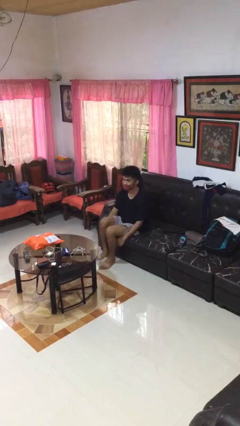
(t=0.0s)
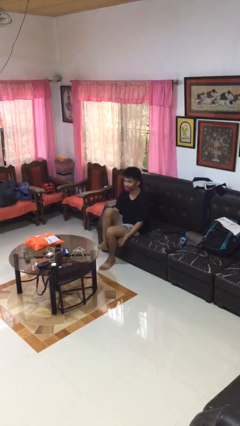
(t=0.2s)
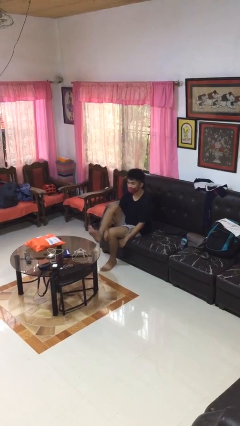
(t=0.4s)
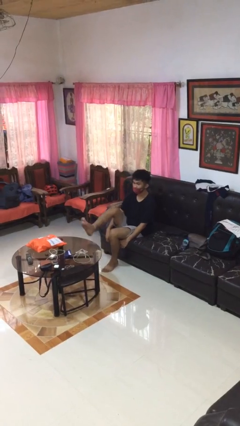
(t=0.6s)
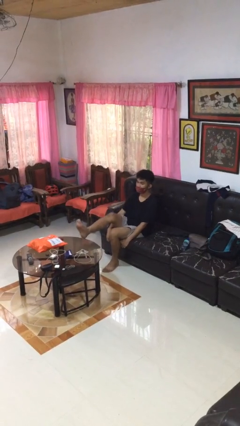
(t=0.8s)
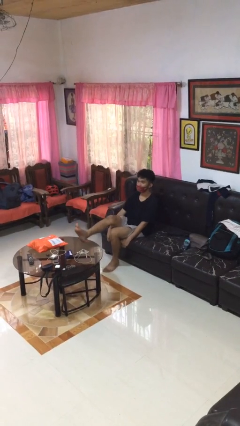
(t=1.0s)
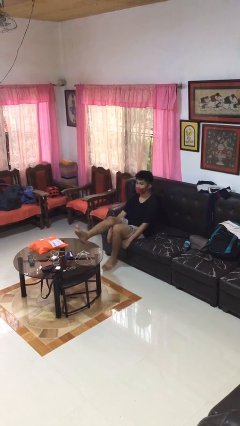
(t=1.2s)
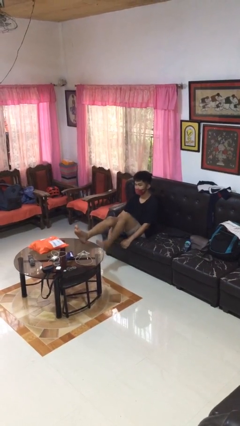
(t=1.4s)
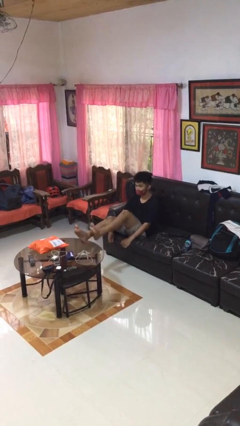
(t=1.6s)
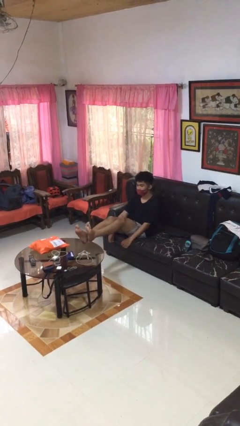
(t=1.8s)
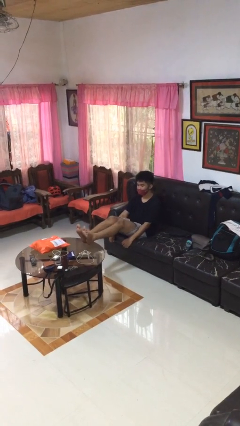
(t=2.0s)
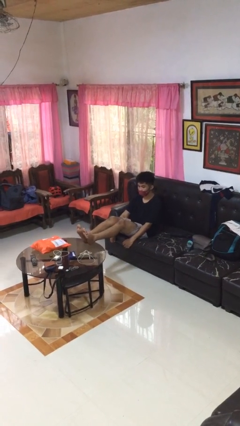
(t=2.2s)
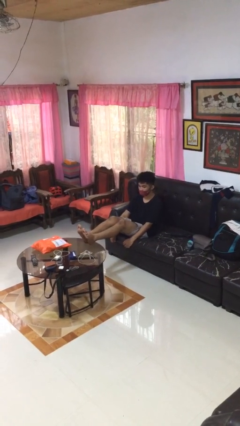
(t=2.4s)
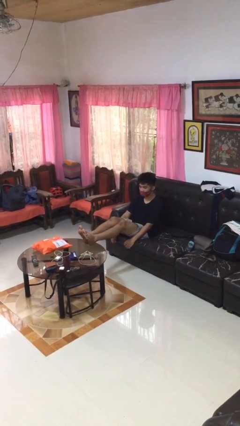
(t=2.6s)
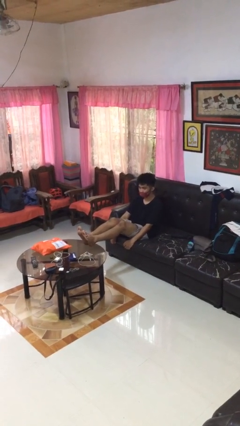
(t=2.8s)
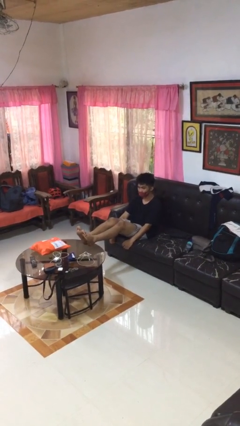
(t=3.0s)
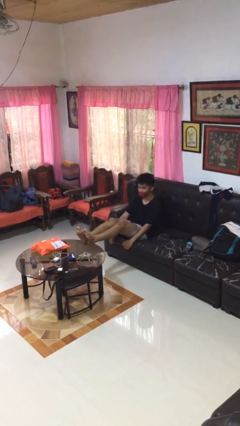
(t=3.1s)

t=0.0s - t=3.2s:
person puts feet up

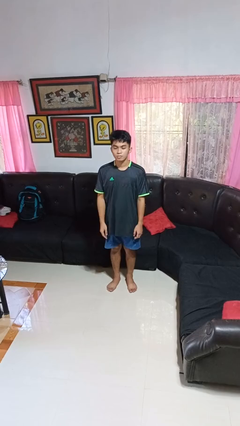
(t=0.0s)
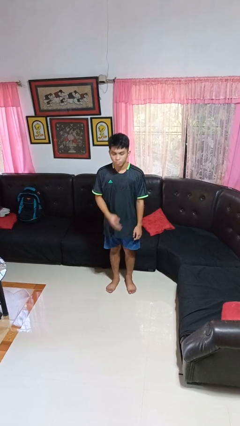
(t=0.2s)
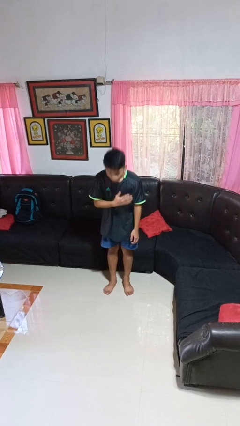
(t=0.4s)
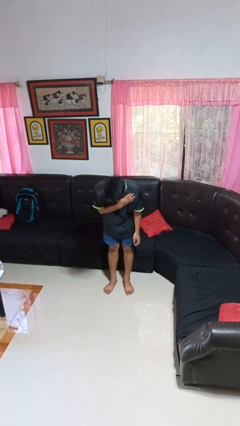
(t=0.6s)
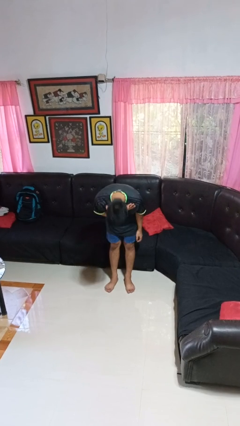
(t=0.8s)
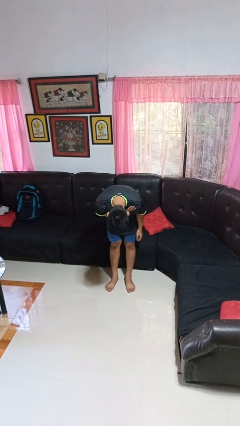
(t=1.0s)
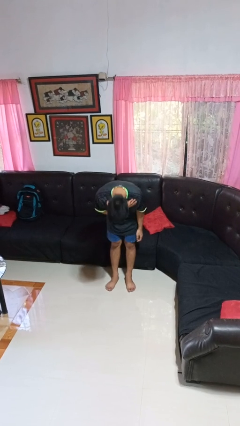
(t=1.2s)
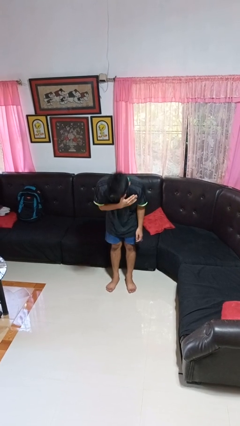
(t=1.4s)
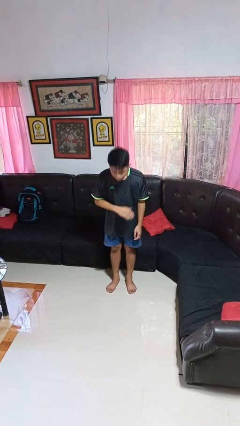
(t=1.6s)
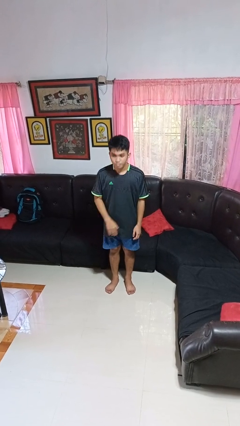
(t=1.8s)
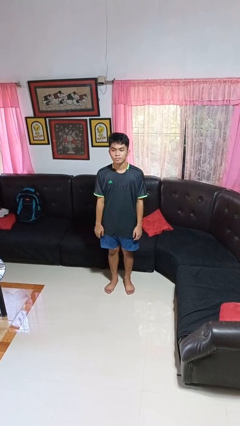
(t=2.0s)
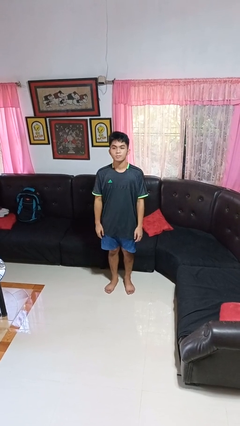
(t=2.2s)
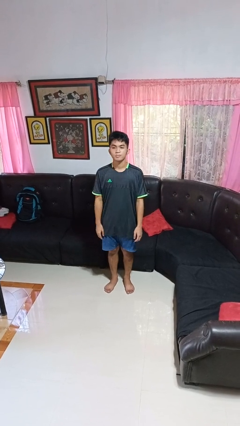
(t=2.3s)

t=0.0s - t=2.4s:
person bows

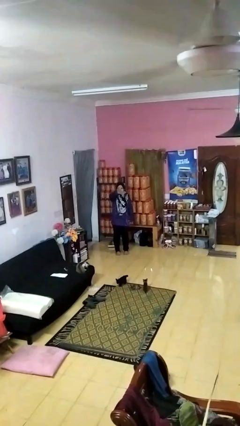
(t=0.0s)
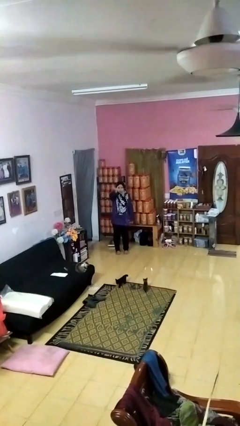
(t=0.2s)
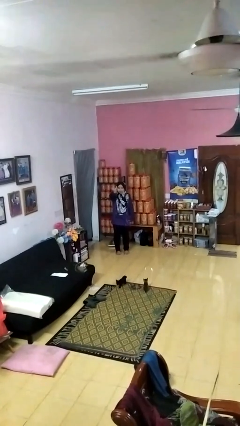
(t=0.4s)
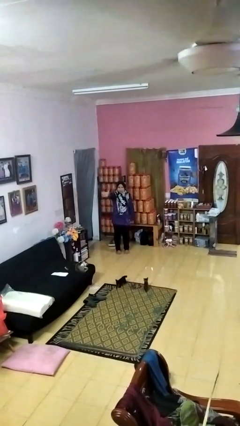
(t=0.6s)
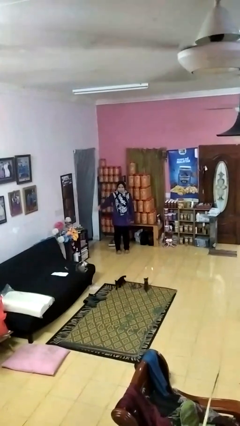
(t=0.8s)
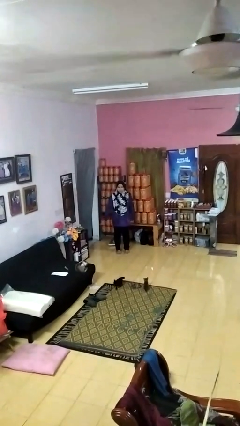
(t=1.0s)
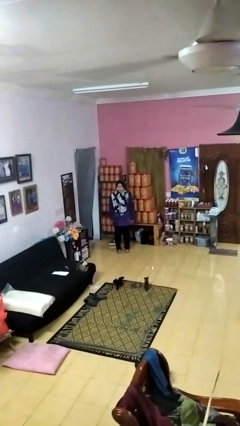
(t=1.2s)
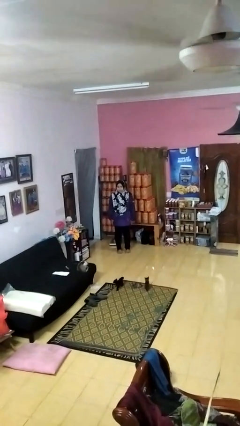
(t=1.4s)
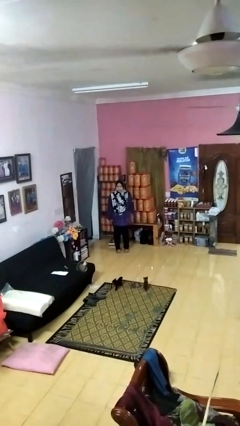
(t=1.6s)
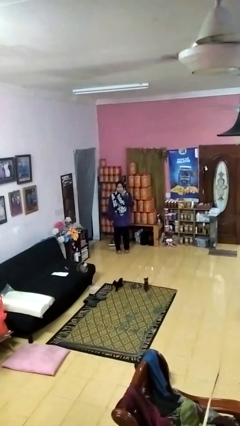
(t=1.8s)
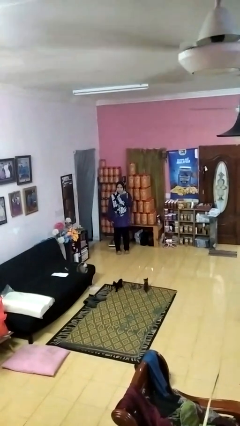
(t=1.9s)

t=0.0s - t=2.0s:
person gestures blow kiss

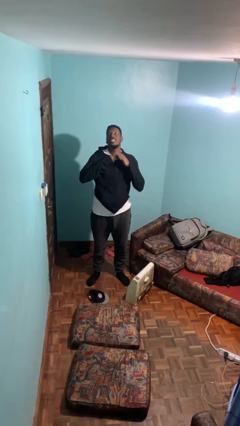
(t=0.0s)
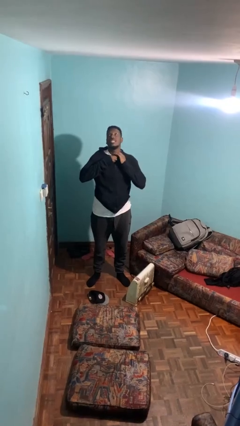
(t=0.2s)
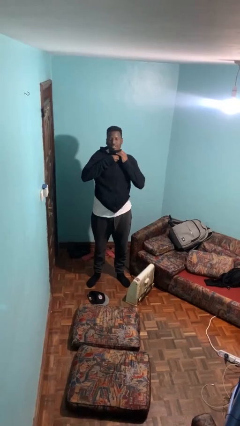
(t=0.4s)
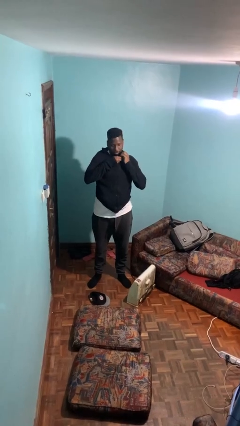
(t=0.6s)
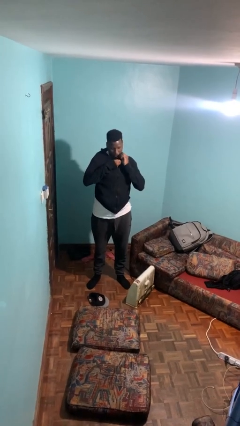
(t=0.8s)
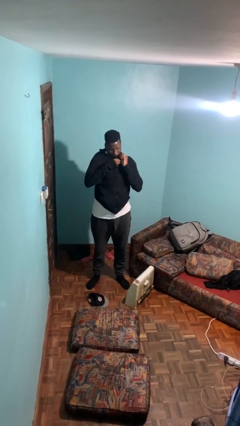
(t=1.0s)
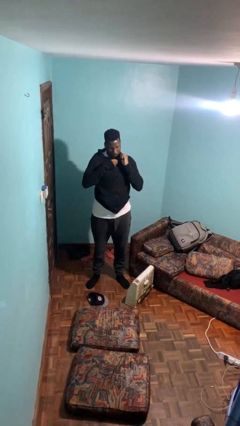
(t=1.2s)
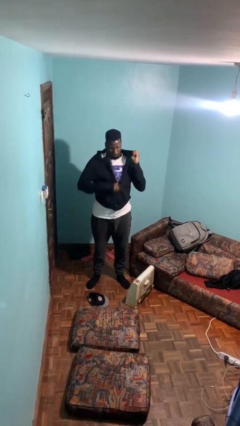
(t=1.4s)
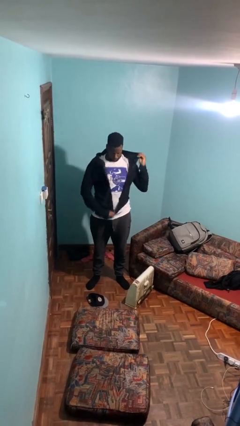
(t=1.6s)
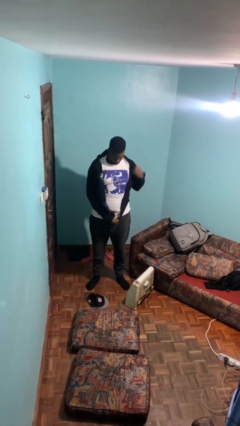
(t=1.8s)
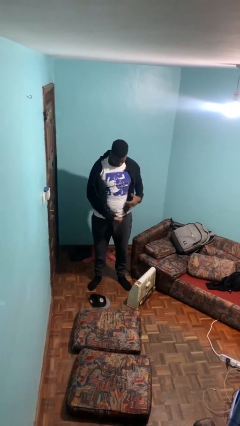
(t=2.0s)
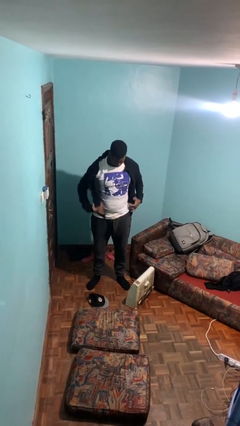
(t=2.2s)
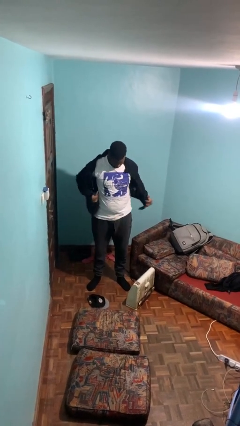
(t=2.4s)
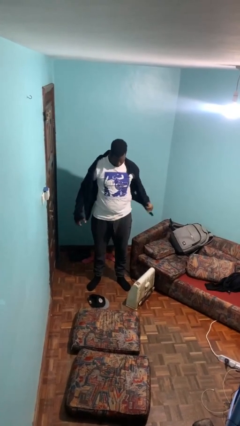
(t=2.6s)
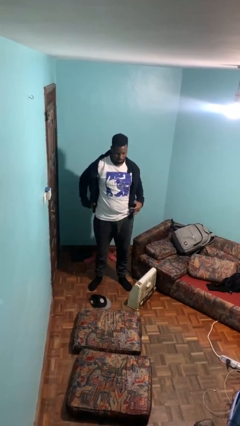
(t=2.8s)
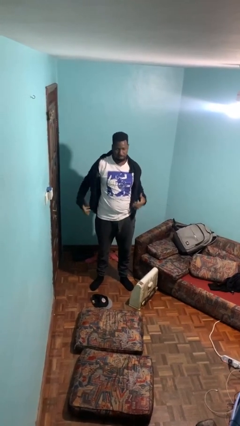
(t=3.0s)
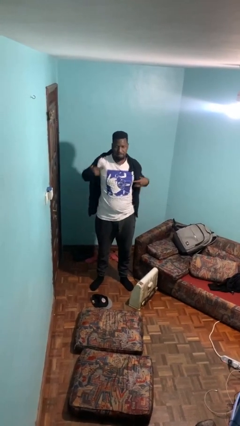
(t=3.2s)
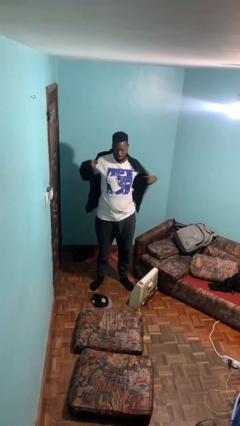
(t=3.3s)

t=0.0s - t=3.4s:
person unzips jacket

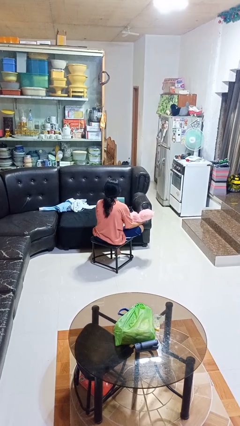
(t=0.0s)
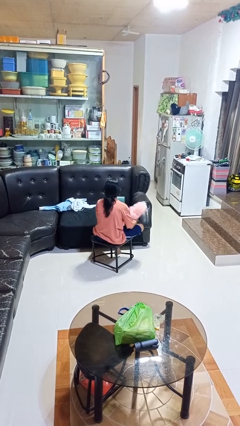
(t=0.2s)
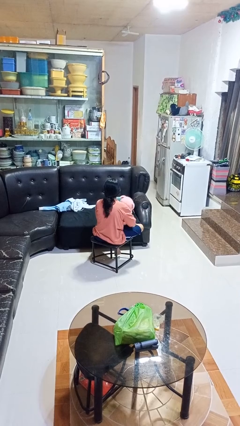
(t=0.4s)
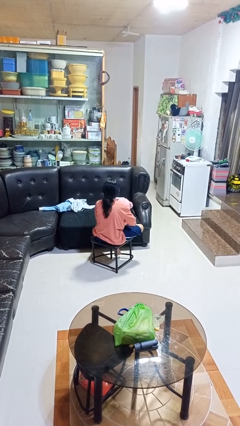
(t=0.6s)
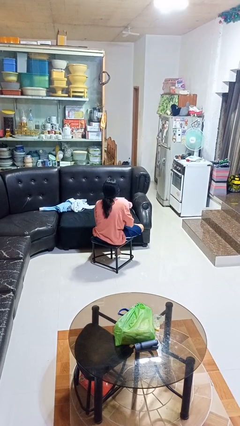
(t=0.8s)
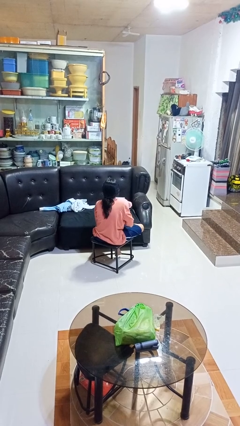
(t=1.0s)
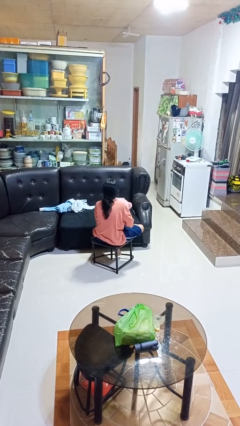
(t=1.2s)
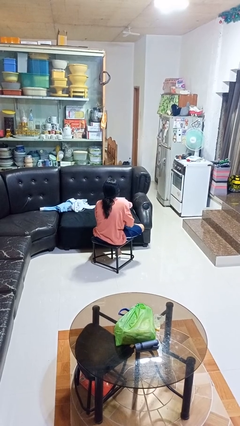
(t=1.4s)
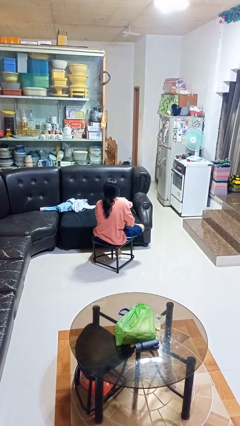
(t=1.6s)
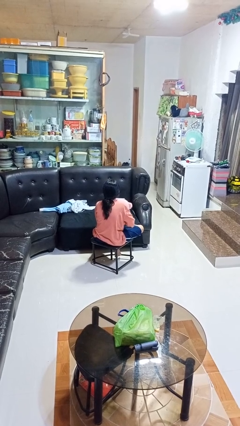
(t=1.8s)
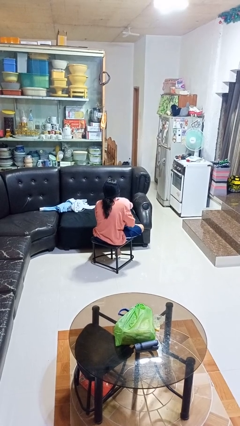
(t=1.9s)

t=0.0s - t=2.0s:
person hugs stuffed animal

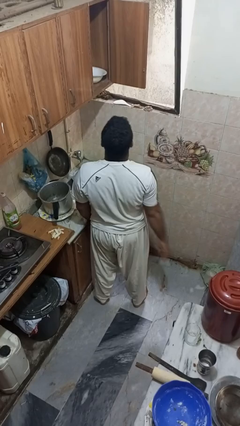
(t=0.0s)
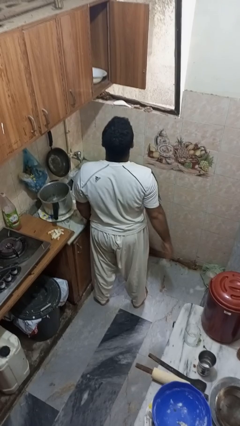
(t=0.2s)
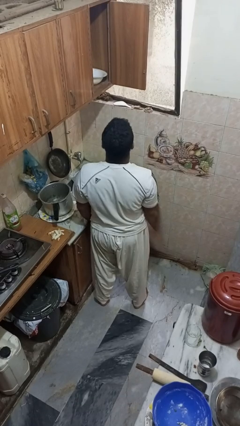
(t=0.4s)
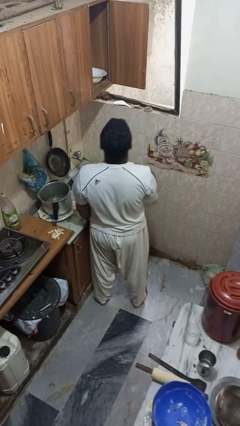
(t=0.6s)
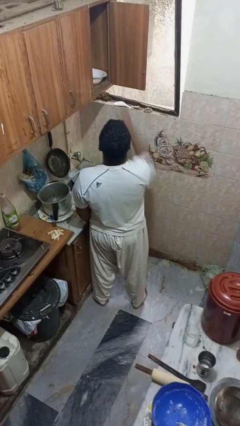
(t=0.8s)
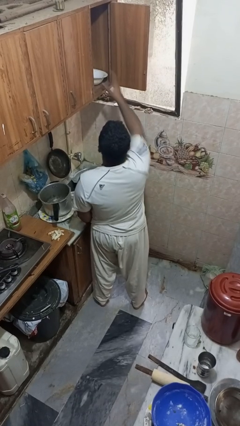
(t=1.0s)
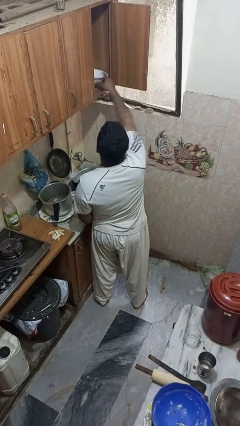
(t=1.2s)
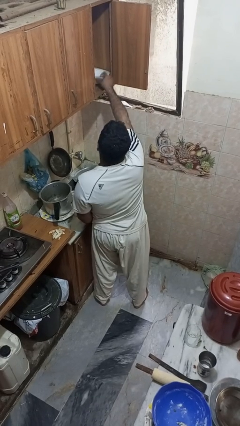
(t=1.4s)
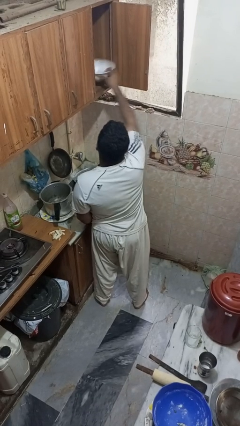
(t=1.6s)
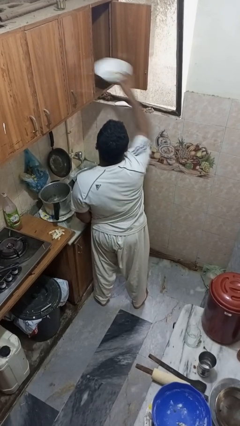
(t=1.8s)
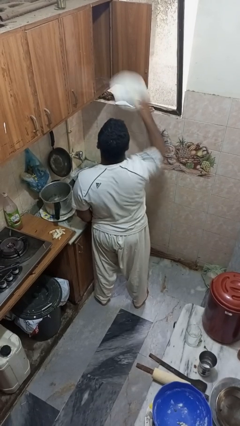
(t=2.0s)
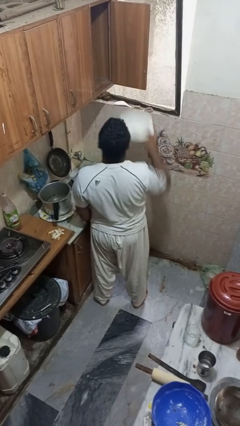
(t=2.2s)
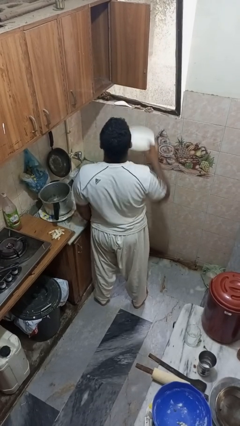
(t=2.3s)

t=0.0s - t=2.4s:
person takes object from cabinet

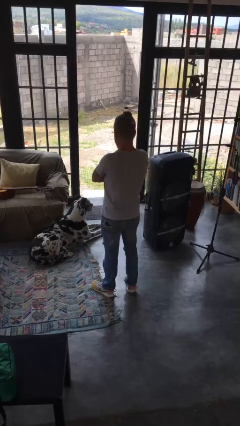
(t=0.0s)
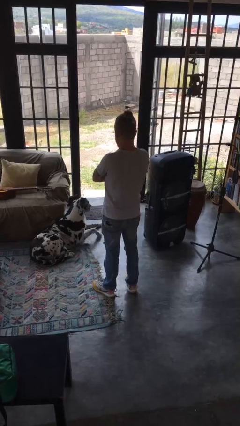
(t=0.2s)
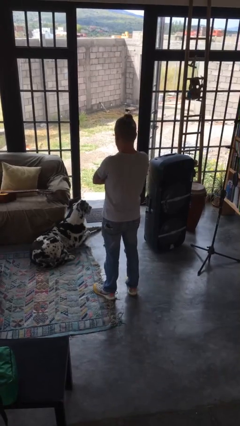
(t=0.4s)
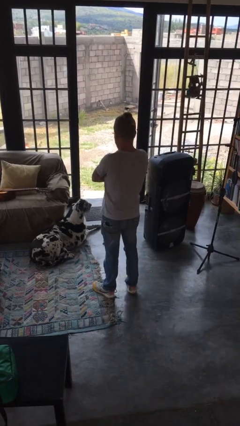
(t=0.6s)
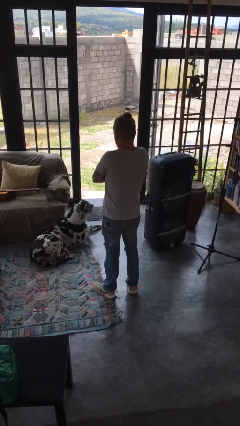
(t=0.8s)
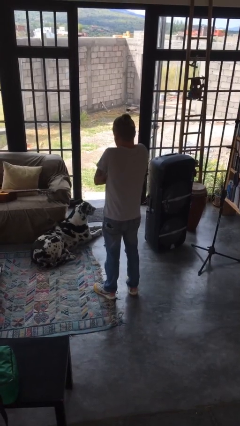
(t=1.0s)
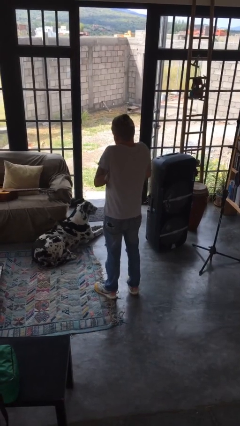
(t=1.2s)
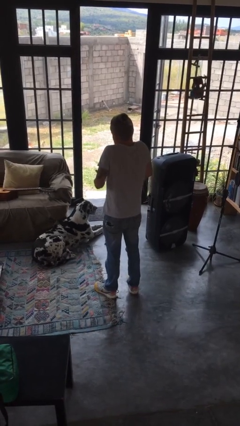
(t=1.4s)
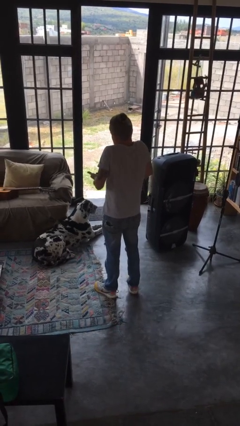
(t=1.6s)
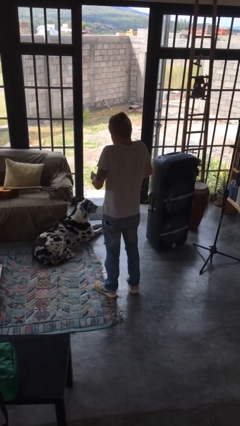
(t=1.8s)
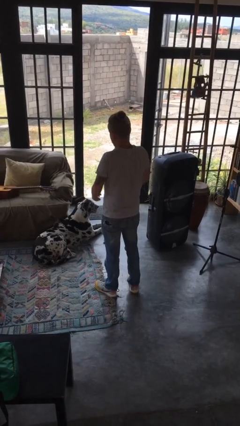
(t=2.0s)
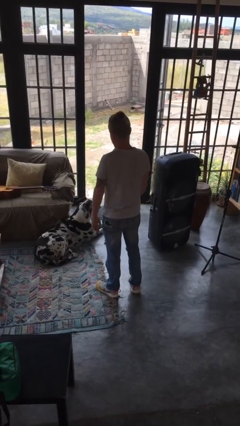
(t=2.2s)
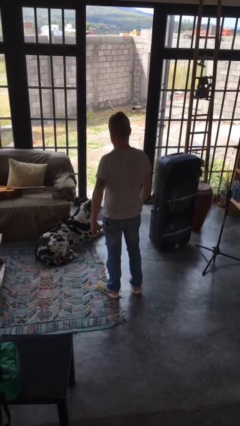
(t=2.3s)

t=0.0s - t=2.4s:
person shrugs
